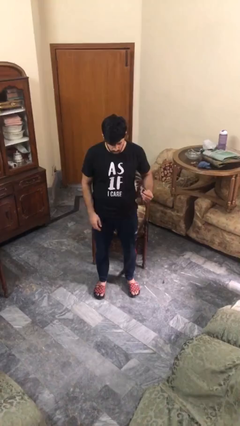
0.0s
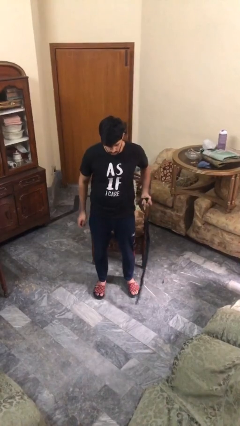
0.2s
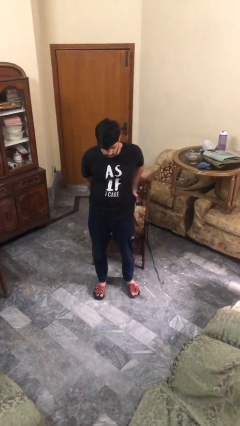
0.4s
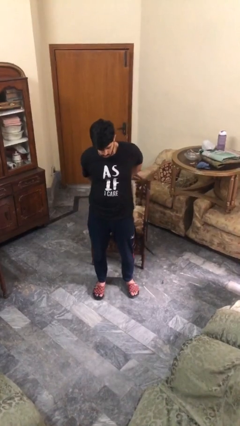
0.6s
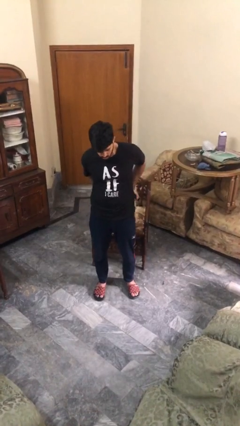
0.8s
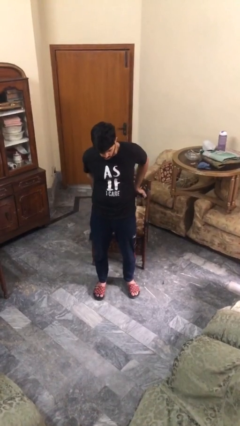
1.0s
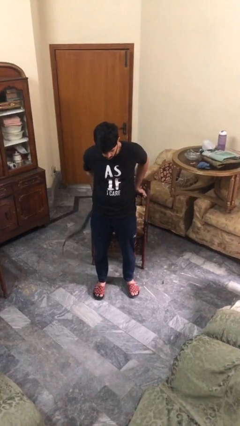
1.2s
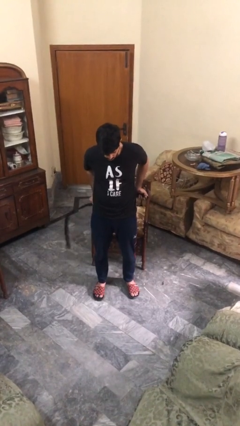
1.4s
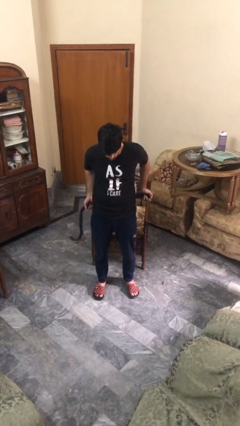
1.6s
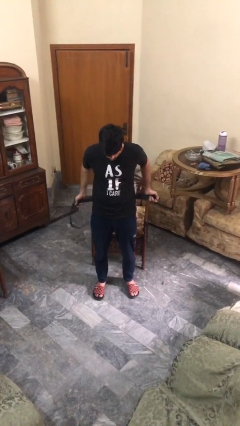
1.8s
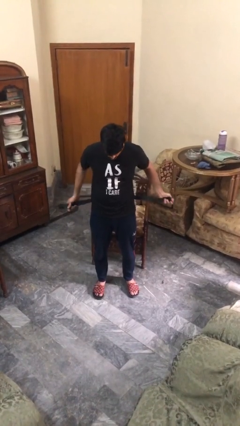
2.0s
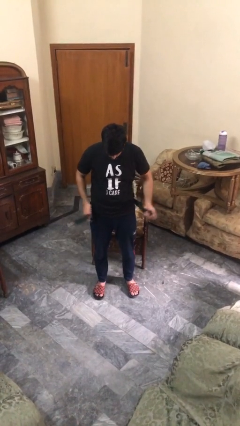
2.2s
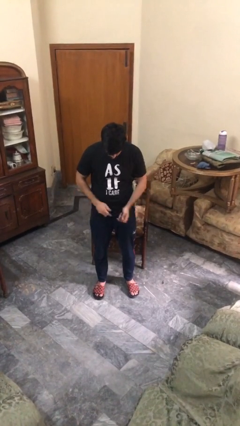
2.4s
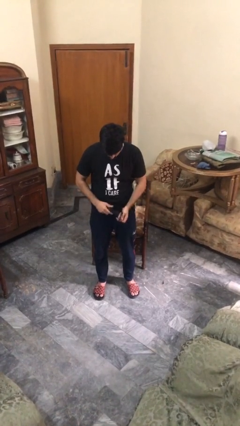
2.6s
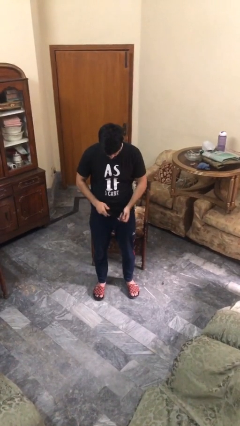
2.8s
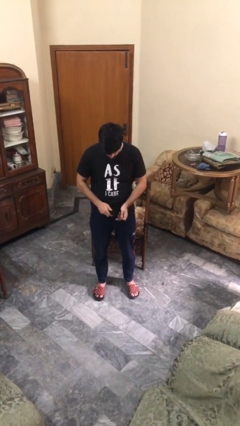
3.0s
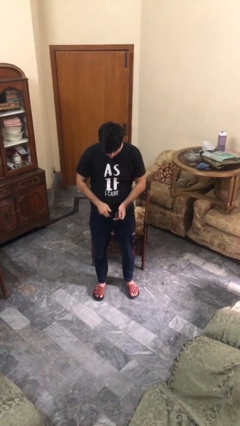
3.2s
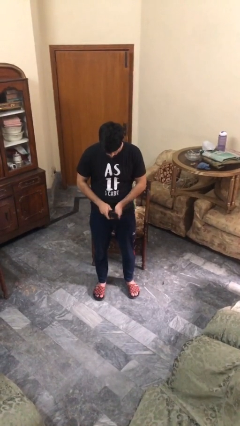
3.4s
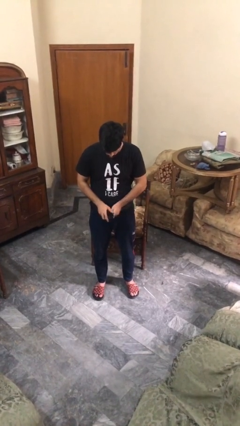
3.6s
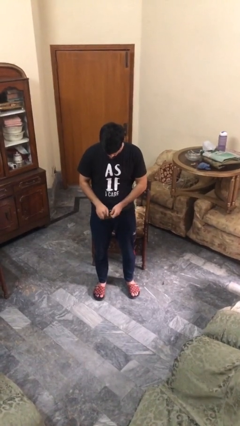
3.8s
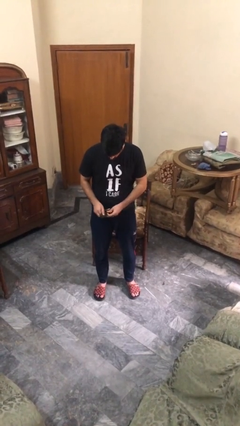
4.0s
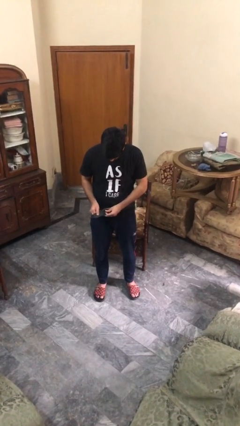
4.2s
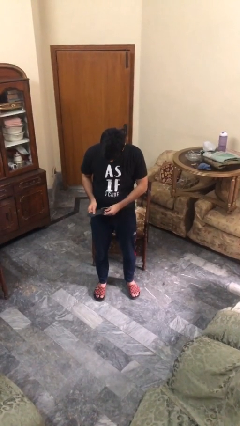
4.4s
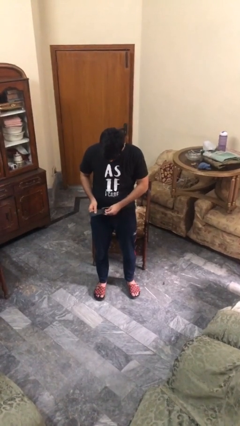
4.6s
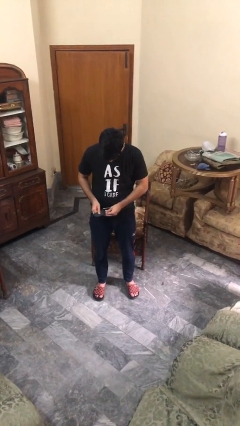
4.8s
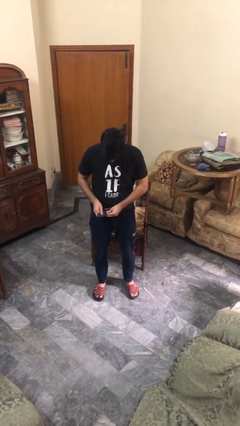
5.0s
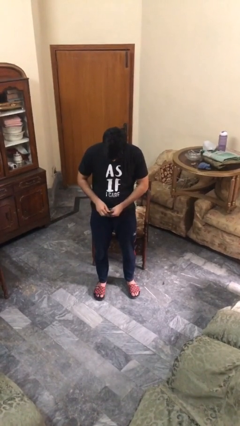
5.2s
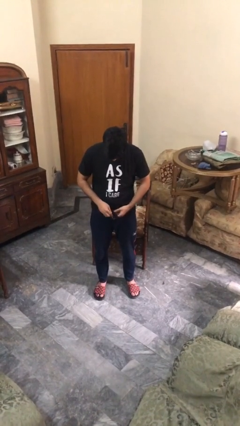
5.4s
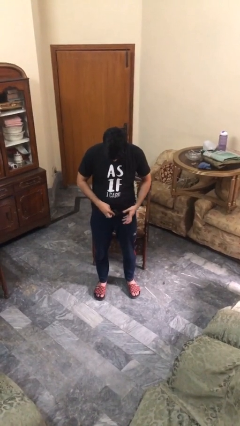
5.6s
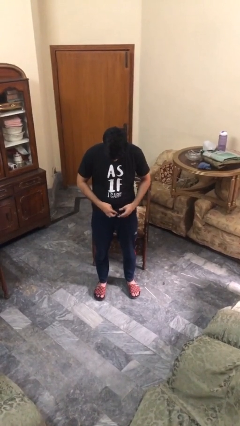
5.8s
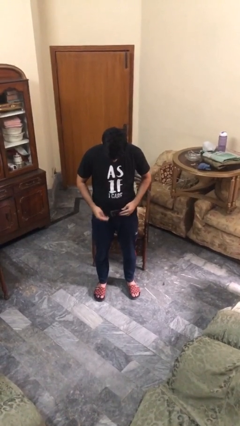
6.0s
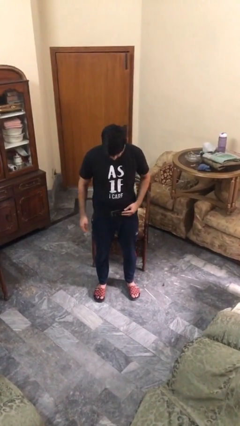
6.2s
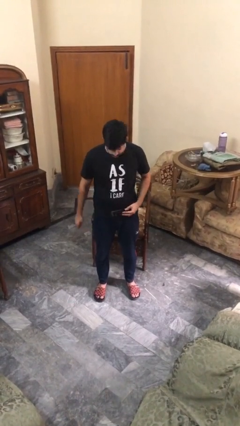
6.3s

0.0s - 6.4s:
person puts on belt

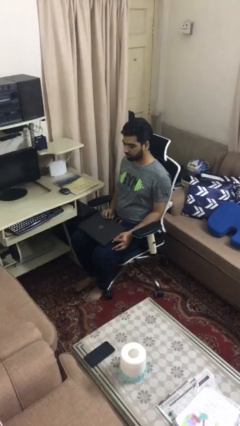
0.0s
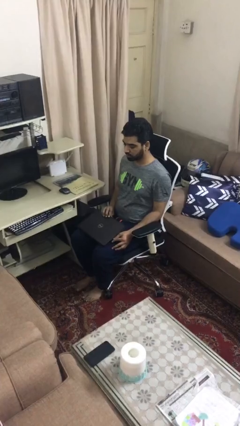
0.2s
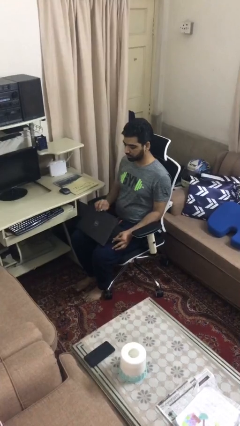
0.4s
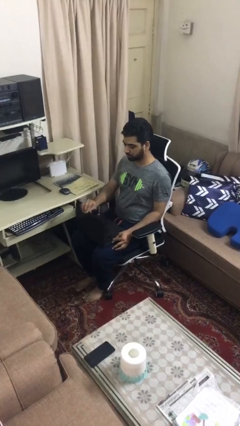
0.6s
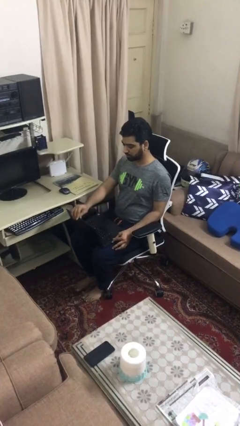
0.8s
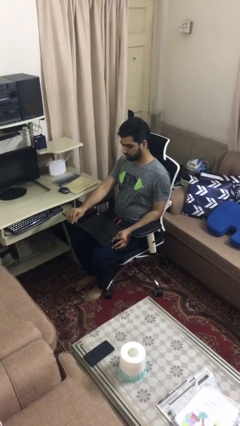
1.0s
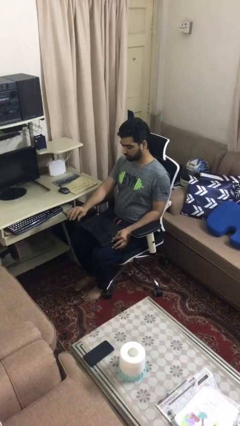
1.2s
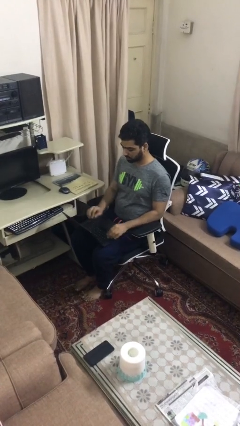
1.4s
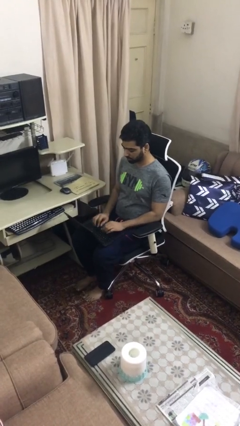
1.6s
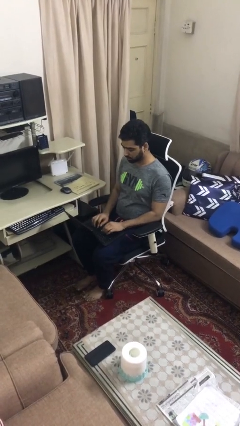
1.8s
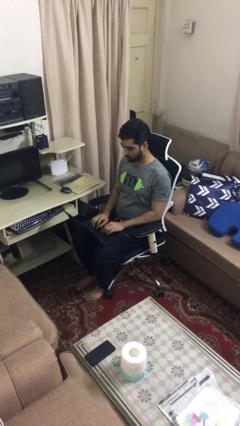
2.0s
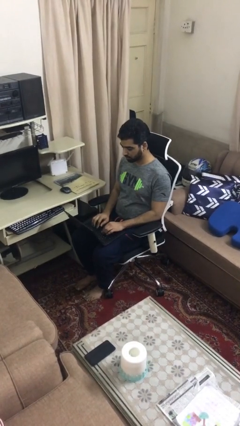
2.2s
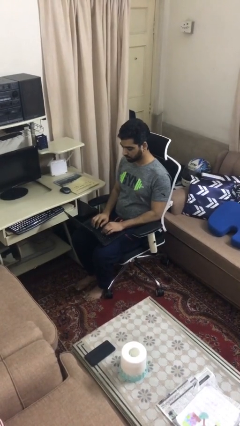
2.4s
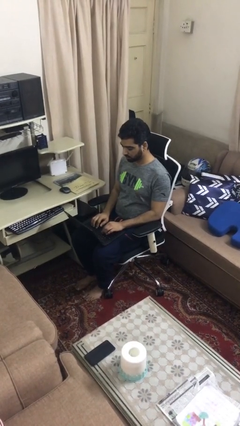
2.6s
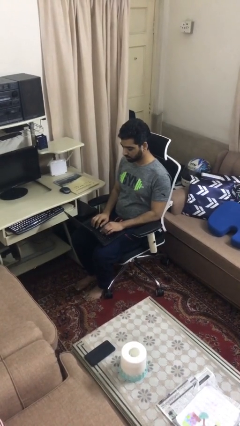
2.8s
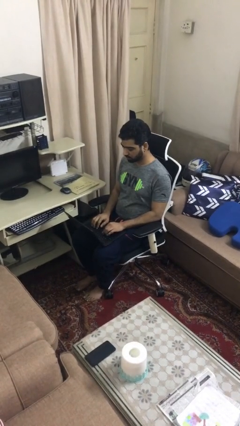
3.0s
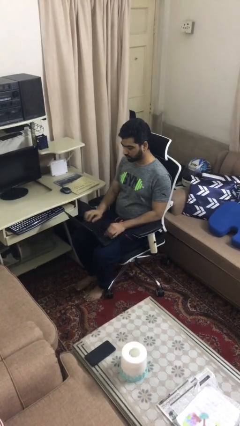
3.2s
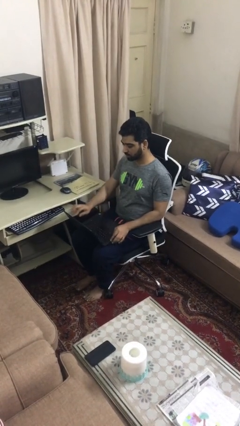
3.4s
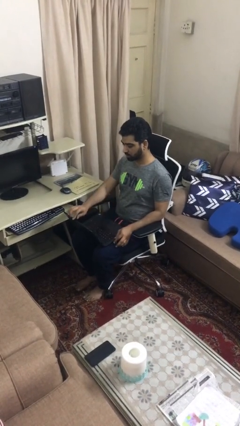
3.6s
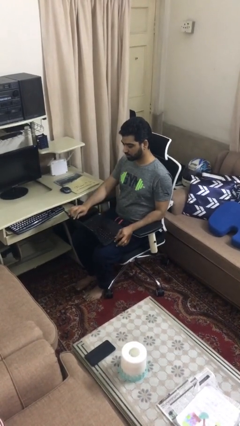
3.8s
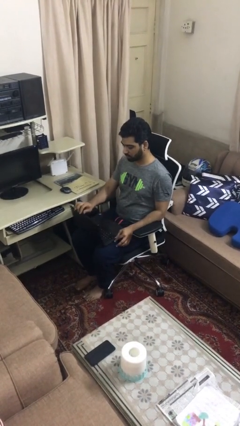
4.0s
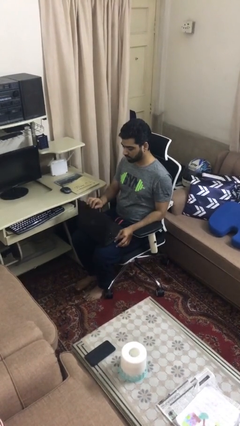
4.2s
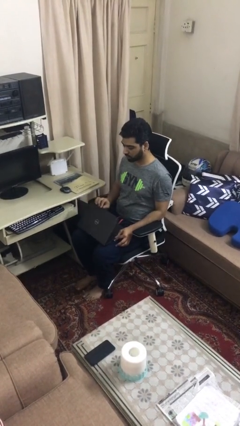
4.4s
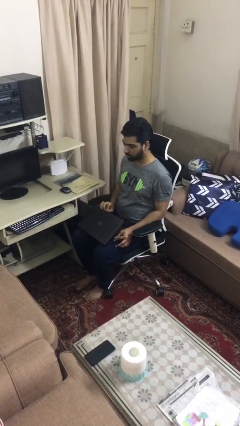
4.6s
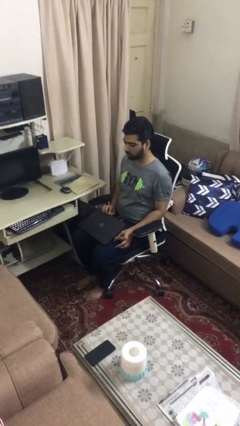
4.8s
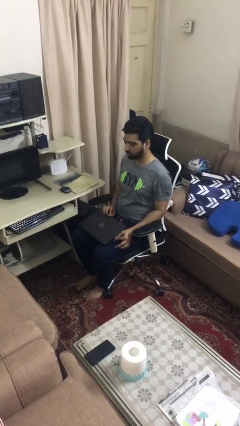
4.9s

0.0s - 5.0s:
person interacts with laptop

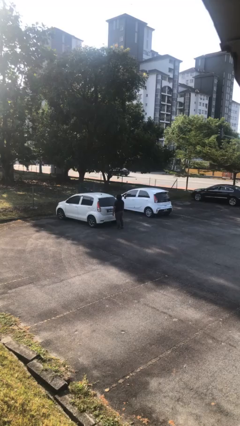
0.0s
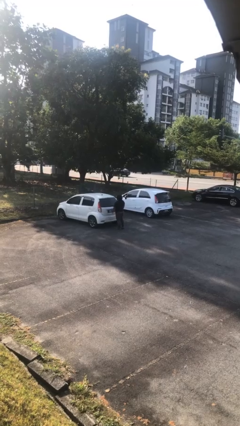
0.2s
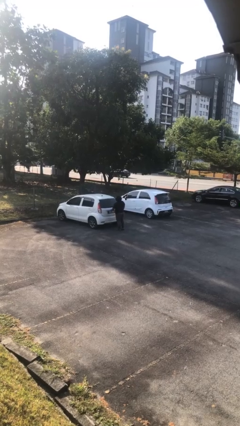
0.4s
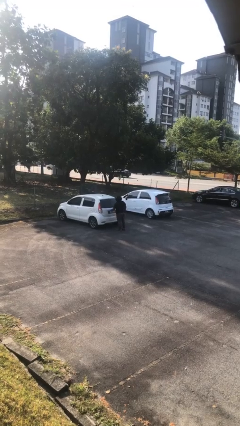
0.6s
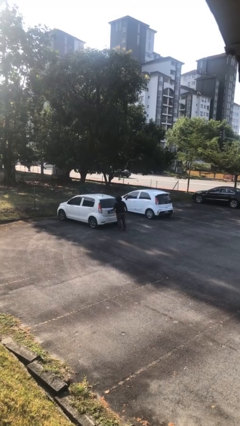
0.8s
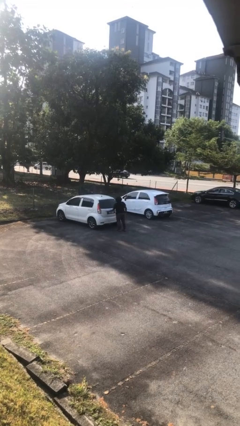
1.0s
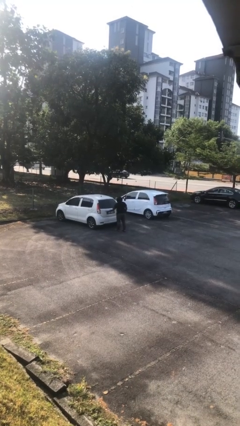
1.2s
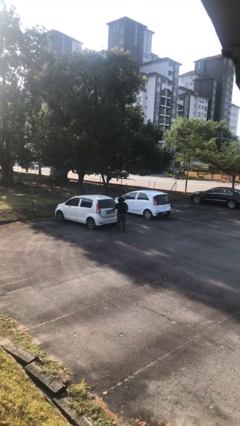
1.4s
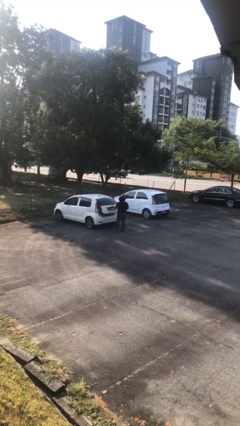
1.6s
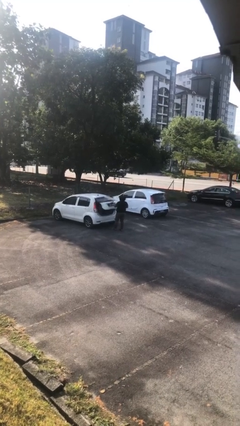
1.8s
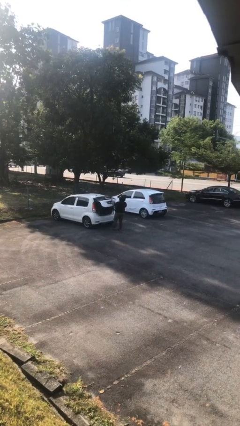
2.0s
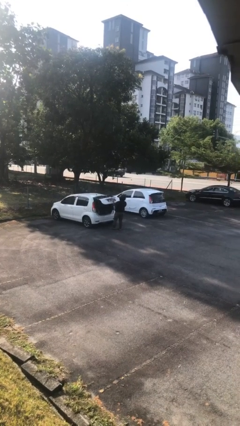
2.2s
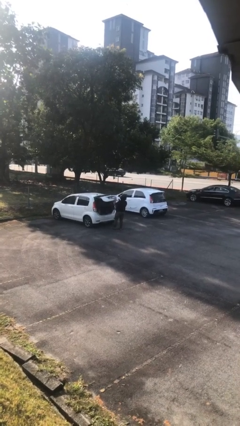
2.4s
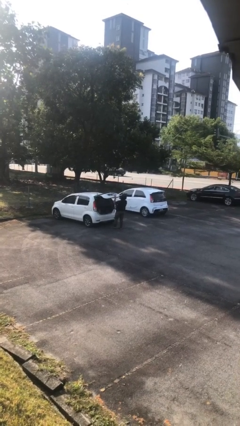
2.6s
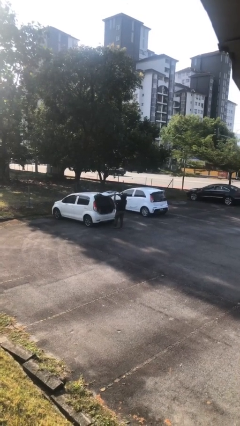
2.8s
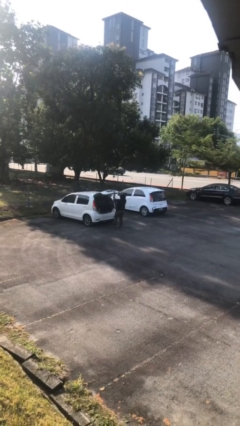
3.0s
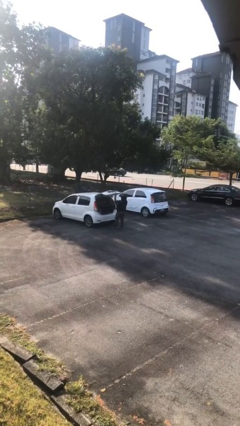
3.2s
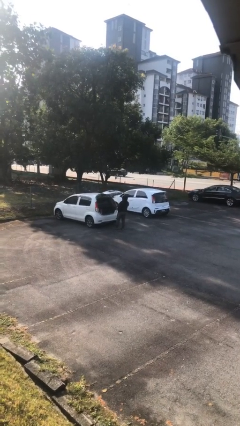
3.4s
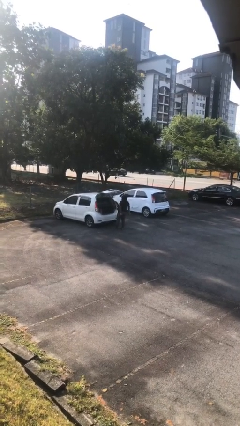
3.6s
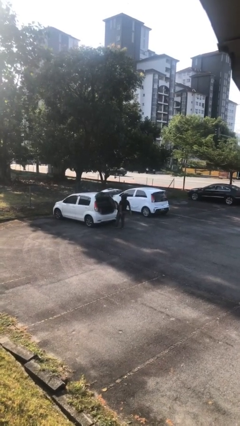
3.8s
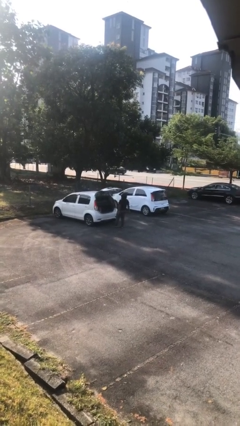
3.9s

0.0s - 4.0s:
person opens car trunk

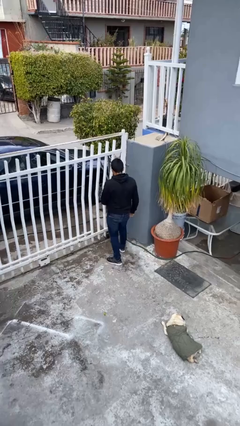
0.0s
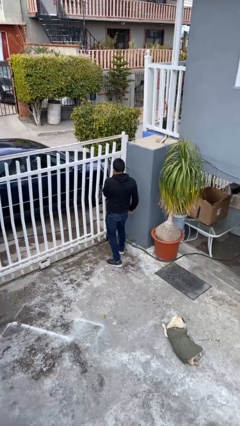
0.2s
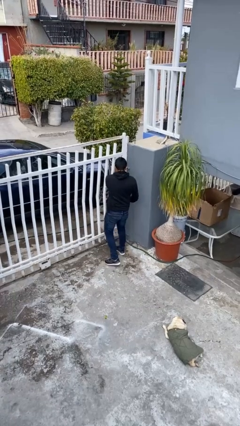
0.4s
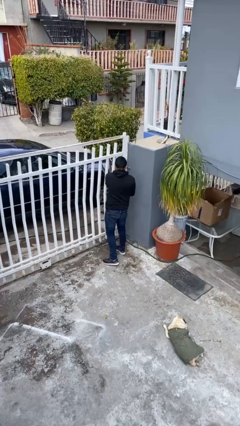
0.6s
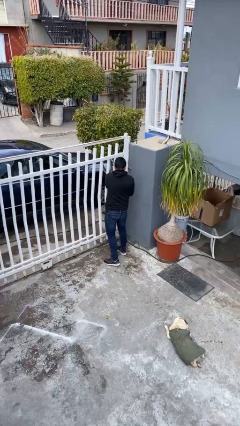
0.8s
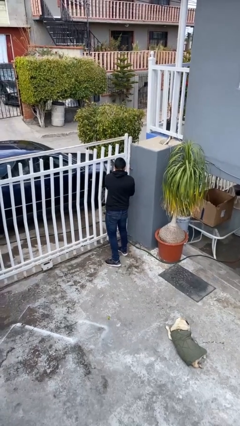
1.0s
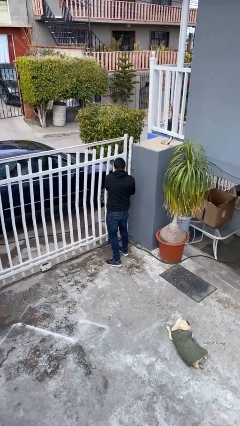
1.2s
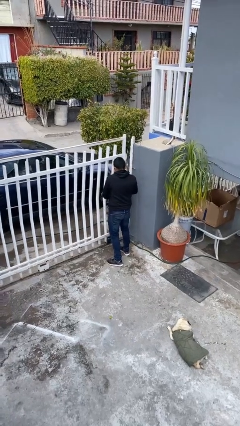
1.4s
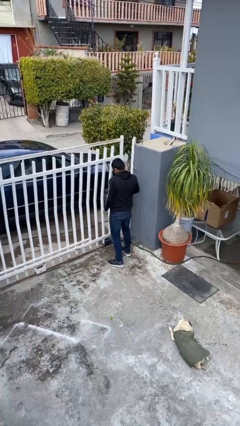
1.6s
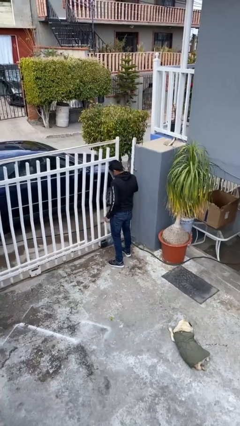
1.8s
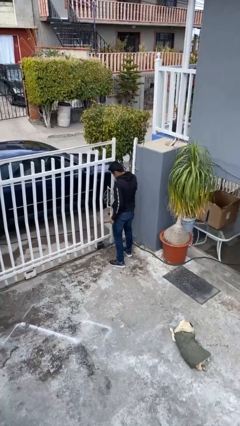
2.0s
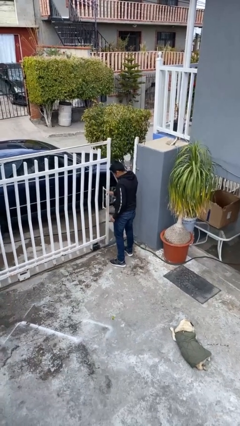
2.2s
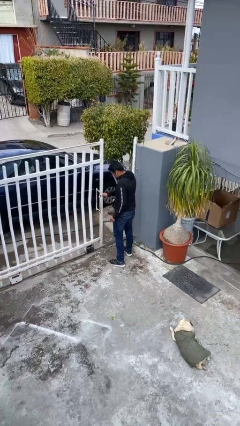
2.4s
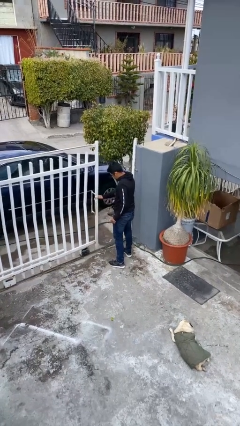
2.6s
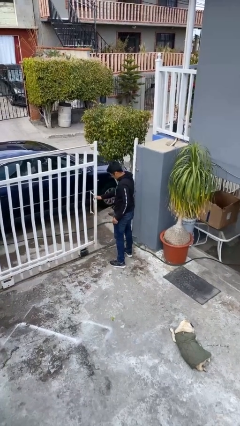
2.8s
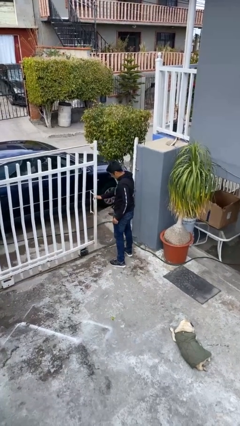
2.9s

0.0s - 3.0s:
person opens facility door
